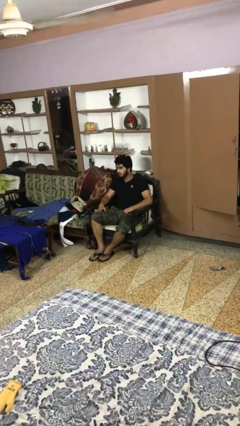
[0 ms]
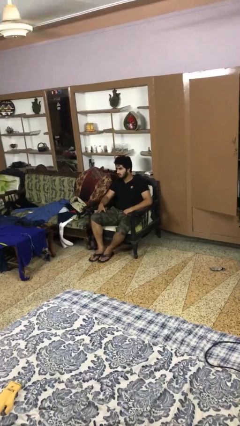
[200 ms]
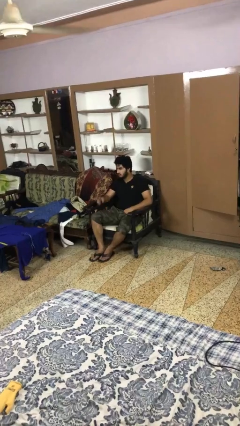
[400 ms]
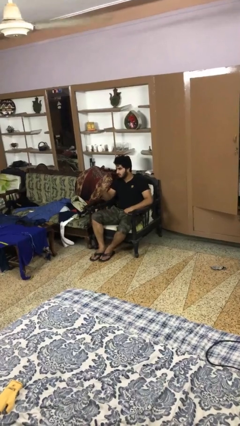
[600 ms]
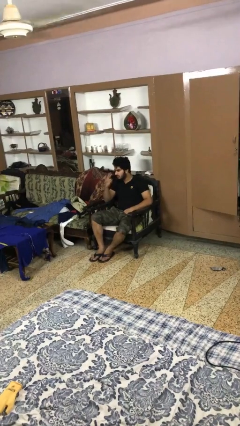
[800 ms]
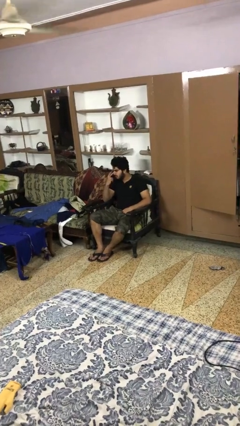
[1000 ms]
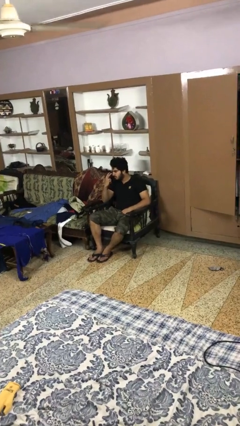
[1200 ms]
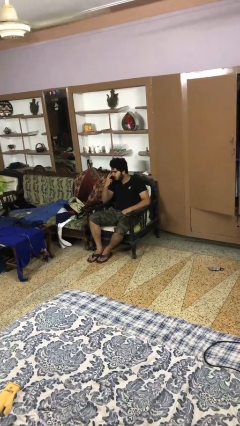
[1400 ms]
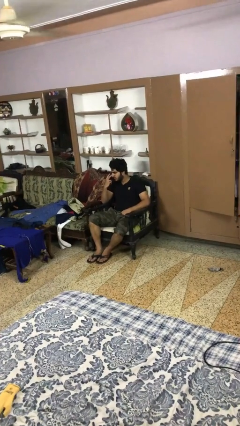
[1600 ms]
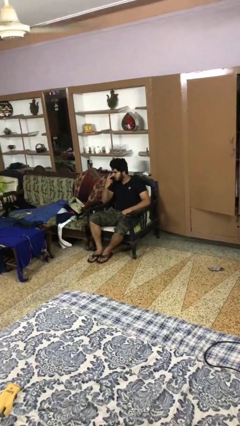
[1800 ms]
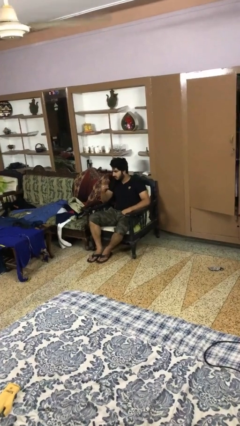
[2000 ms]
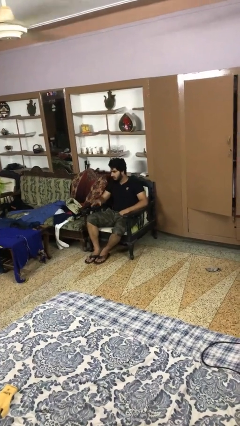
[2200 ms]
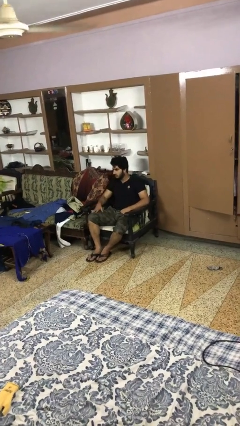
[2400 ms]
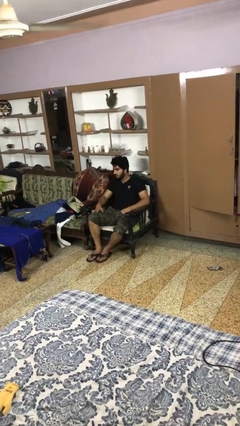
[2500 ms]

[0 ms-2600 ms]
person gestures watch closely

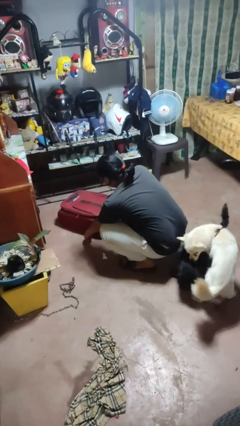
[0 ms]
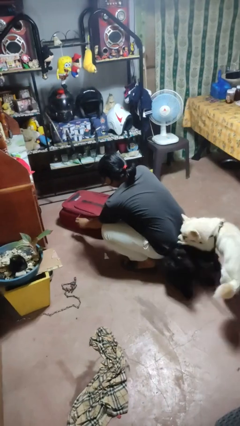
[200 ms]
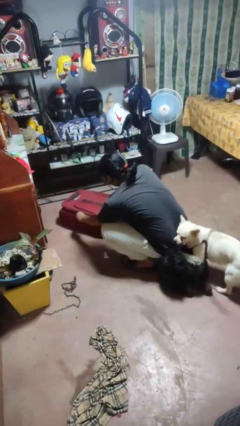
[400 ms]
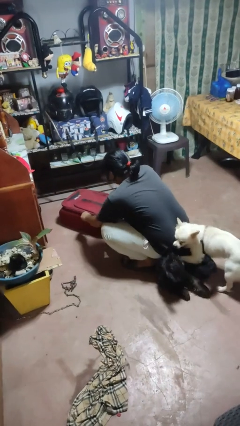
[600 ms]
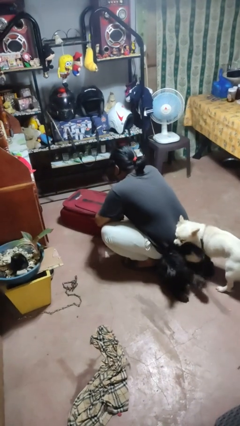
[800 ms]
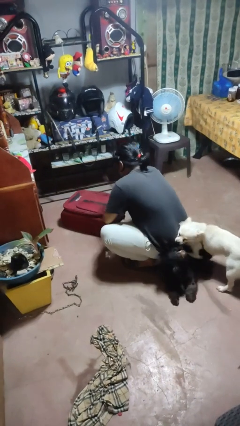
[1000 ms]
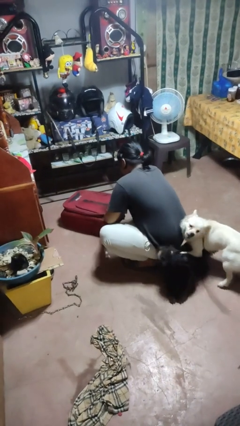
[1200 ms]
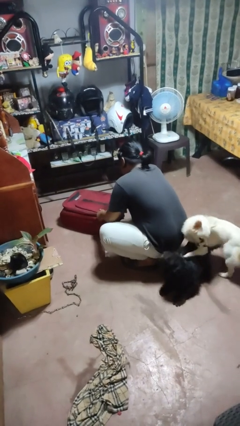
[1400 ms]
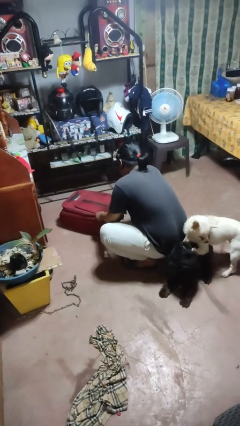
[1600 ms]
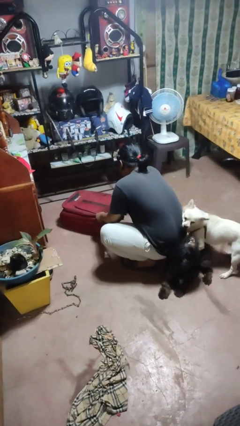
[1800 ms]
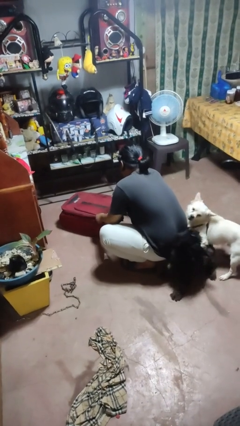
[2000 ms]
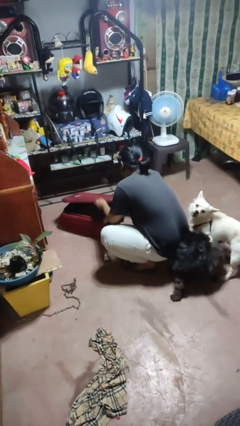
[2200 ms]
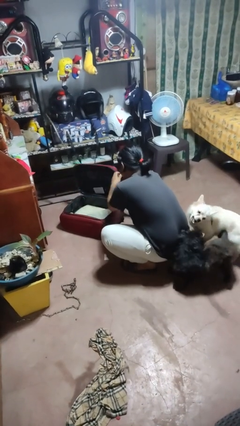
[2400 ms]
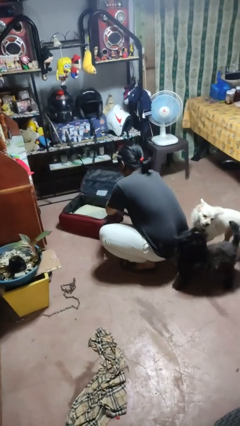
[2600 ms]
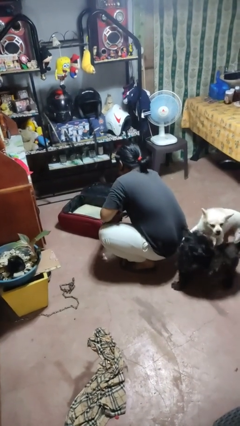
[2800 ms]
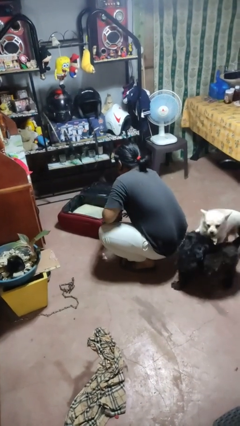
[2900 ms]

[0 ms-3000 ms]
person opens suitcase

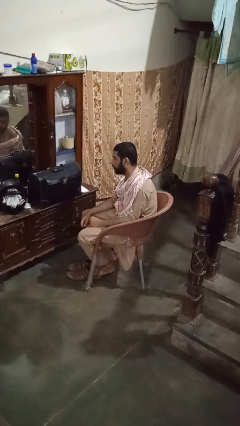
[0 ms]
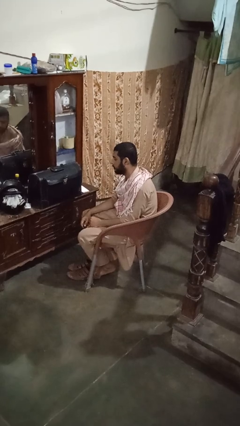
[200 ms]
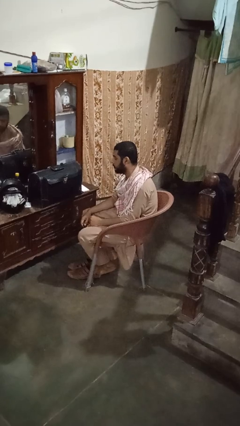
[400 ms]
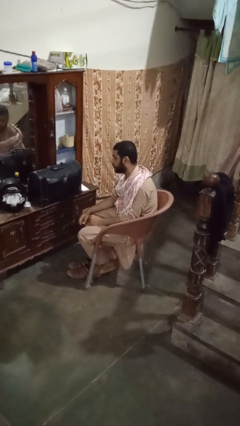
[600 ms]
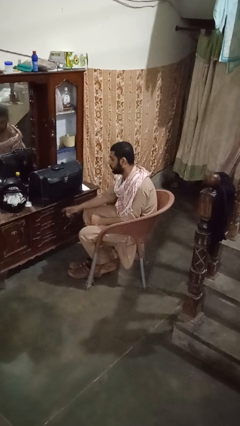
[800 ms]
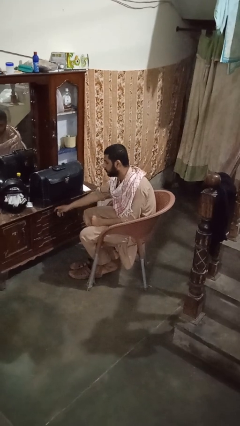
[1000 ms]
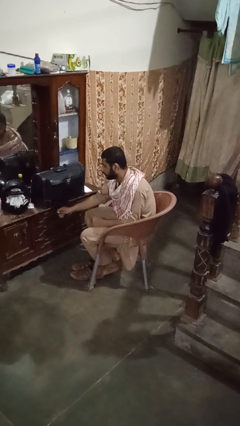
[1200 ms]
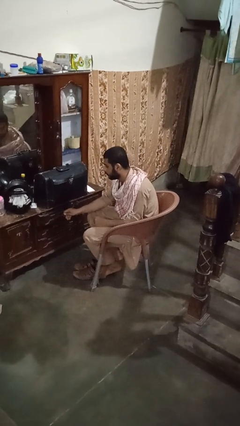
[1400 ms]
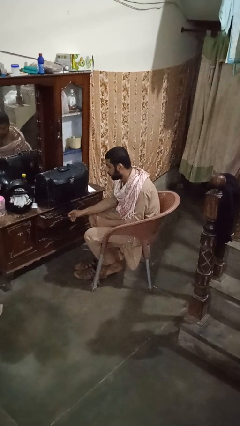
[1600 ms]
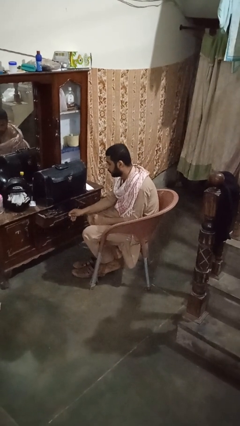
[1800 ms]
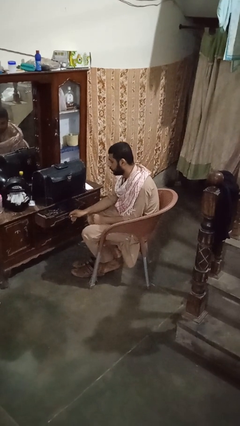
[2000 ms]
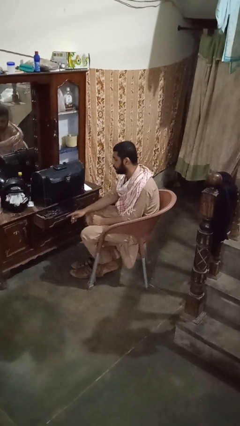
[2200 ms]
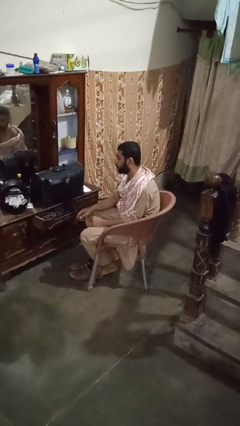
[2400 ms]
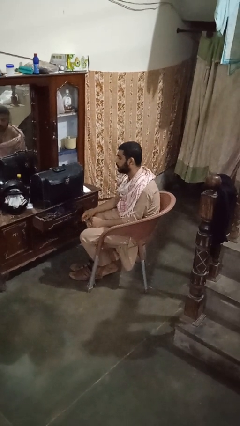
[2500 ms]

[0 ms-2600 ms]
person opens dresser drawer

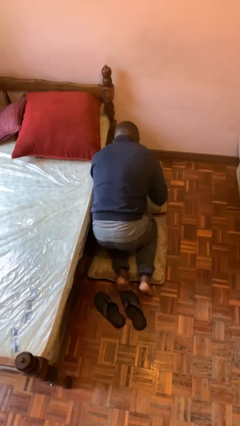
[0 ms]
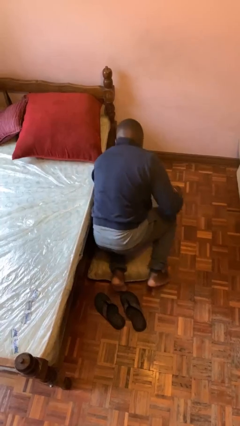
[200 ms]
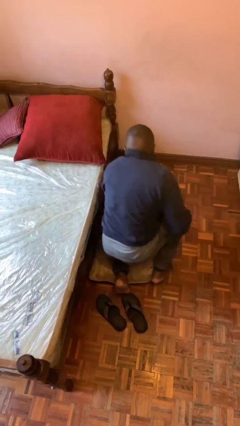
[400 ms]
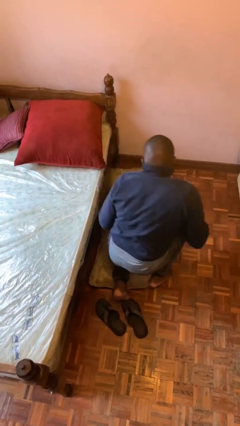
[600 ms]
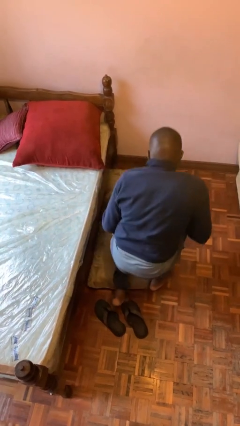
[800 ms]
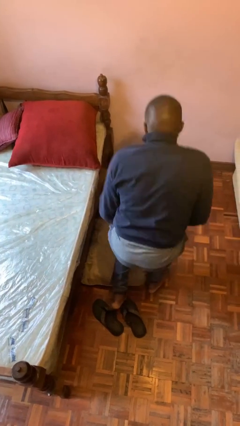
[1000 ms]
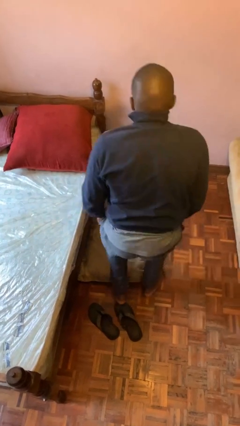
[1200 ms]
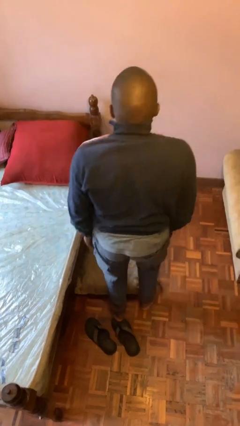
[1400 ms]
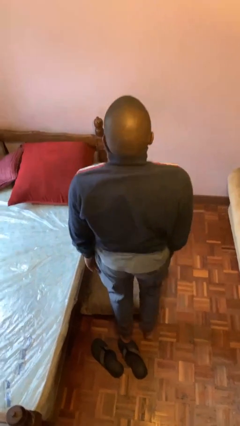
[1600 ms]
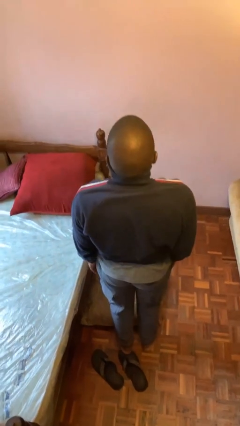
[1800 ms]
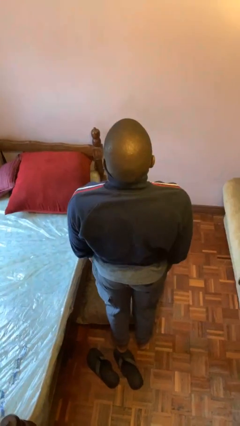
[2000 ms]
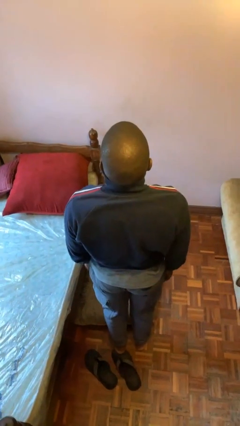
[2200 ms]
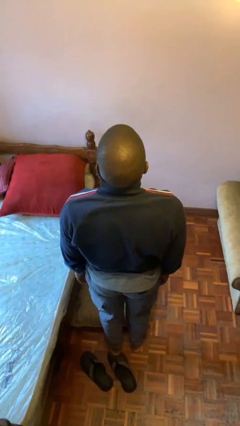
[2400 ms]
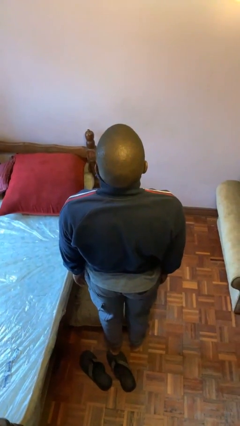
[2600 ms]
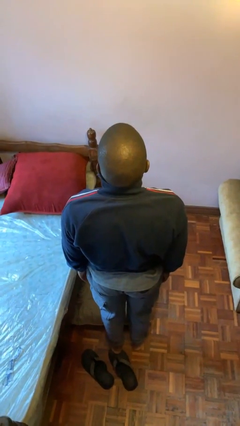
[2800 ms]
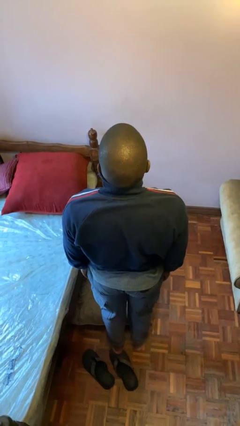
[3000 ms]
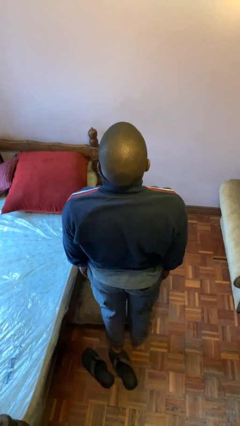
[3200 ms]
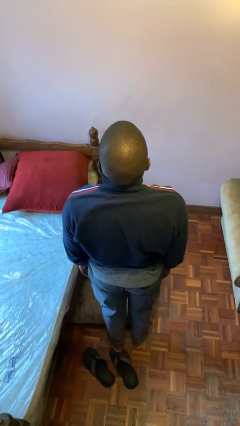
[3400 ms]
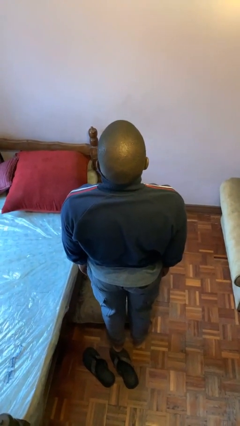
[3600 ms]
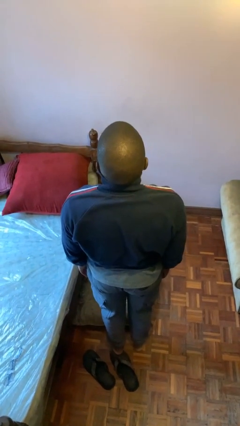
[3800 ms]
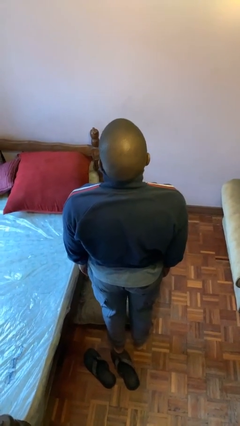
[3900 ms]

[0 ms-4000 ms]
person stands up from floor

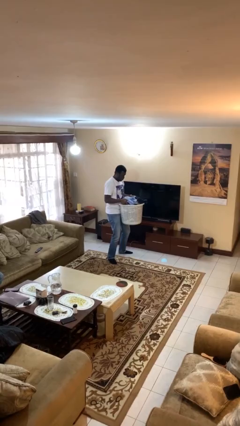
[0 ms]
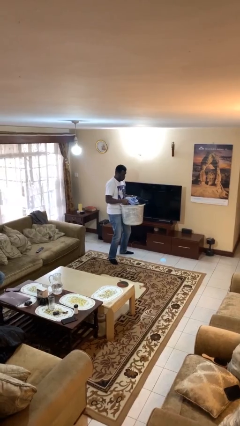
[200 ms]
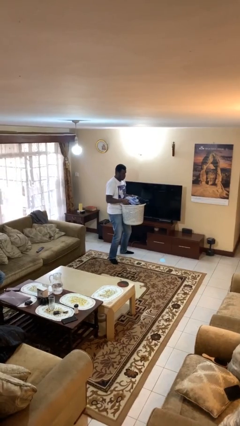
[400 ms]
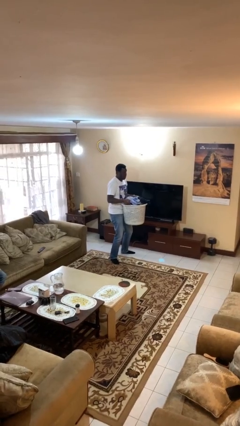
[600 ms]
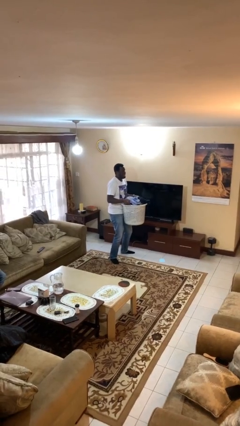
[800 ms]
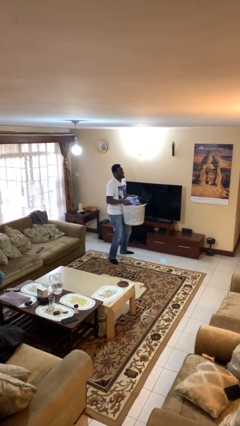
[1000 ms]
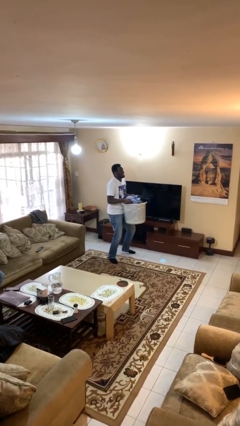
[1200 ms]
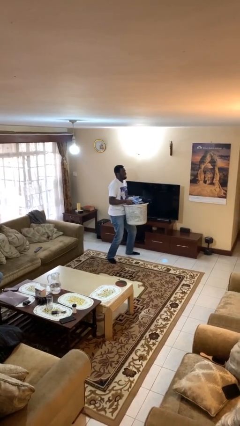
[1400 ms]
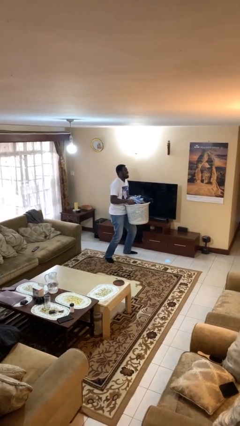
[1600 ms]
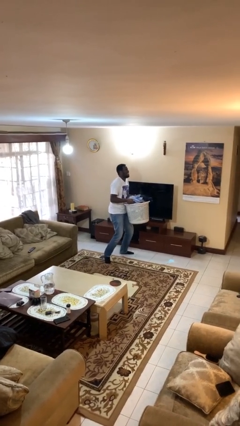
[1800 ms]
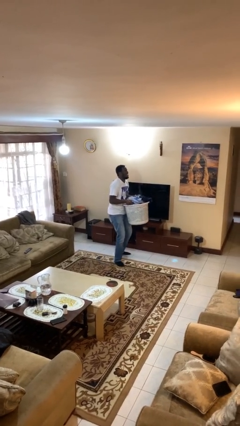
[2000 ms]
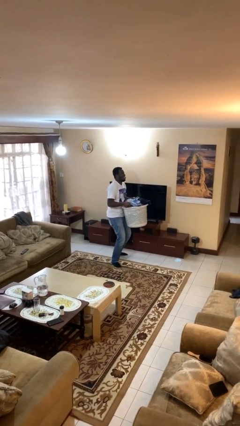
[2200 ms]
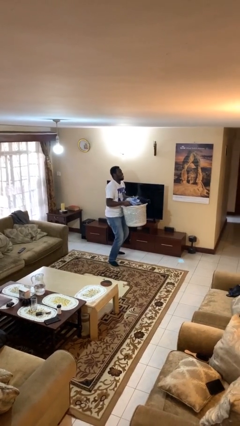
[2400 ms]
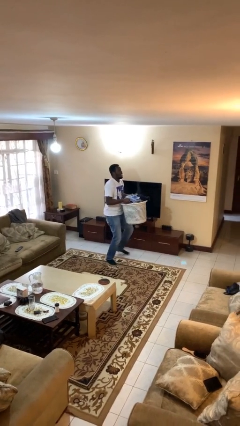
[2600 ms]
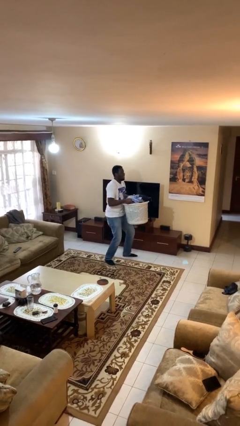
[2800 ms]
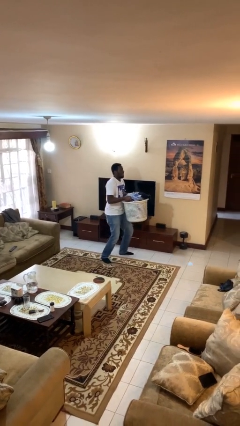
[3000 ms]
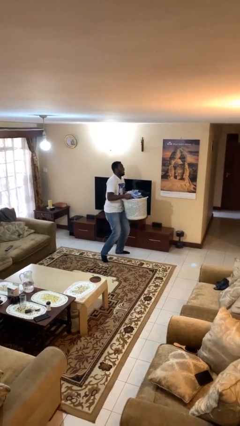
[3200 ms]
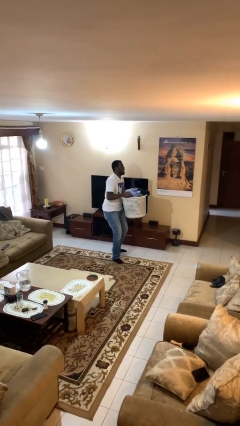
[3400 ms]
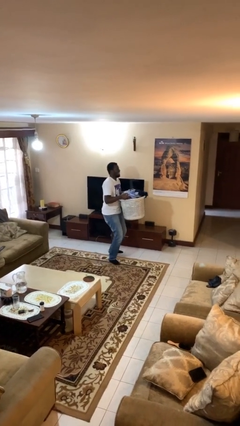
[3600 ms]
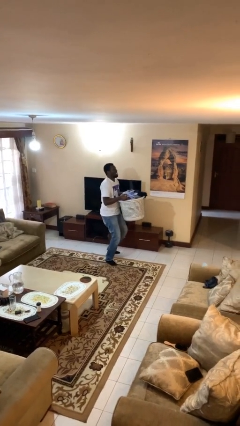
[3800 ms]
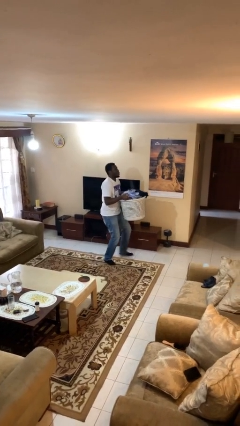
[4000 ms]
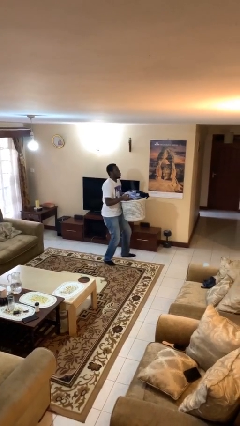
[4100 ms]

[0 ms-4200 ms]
person carries heavy object

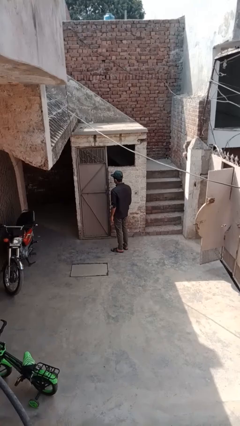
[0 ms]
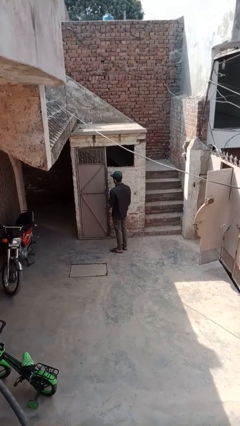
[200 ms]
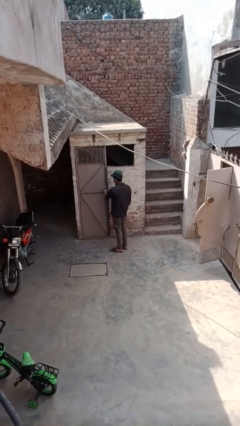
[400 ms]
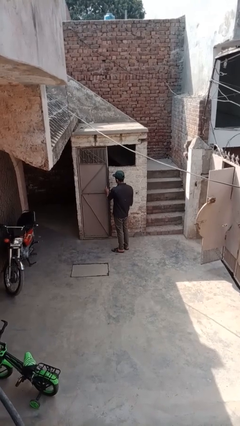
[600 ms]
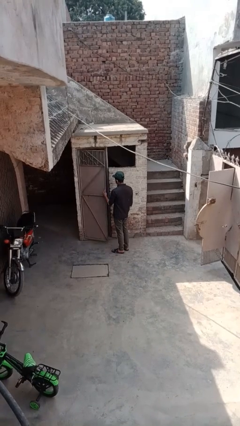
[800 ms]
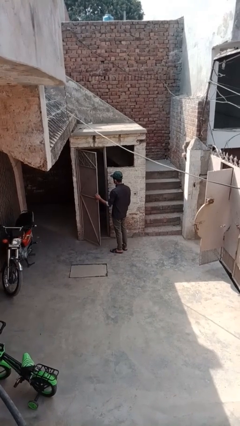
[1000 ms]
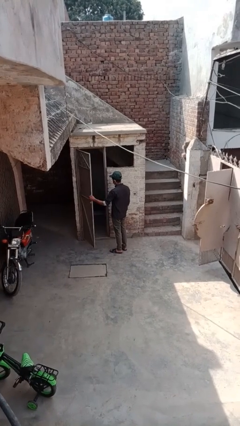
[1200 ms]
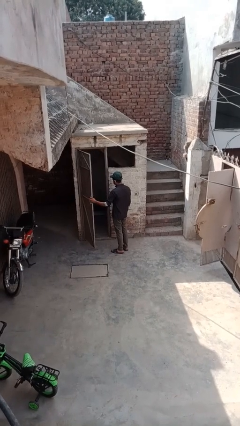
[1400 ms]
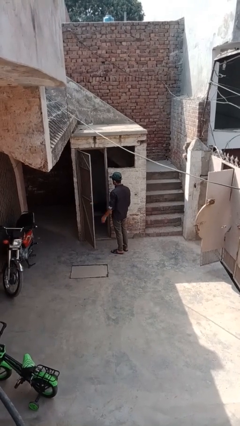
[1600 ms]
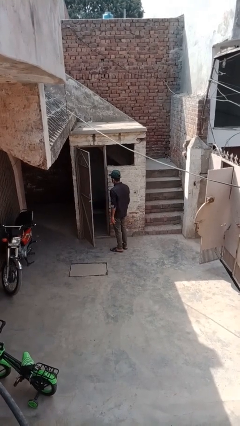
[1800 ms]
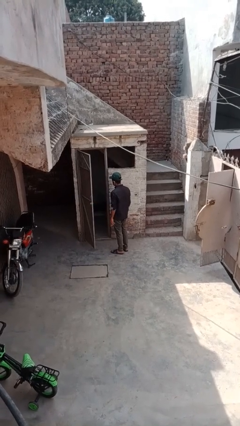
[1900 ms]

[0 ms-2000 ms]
person opens facility door
